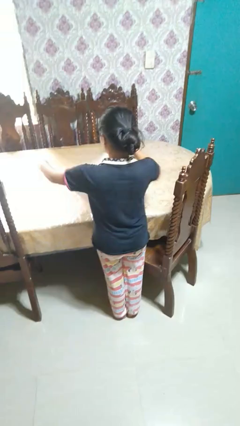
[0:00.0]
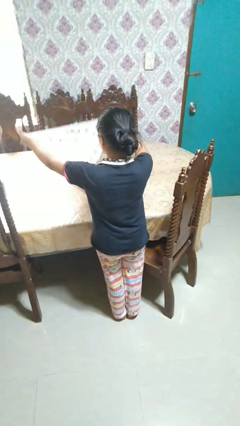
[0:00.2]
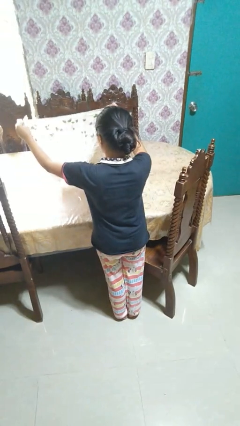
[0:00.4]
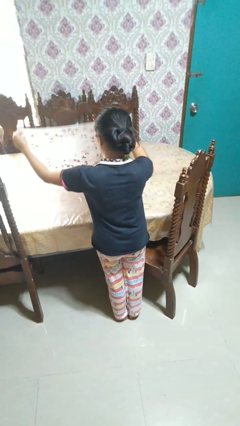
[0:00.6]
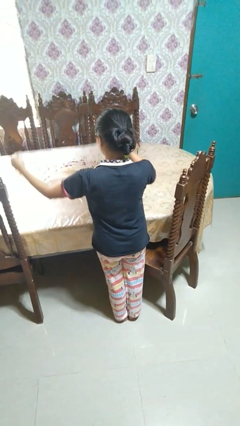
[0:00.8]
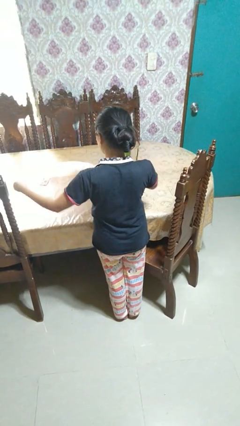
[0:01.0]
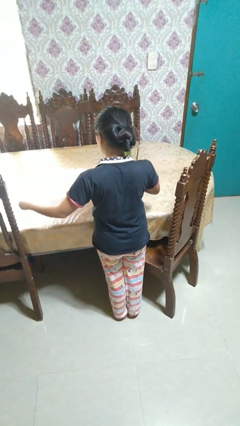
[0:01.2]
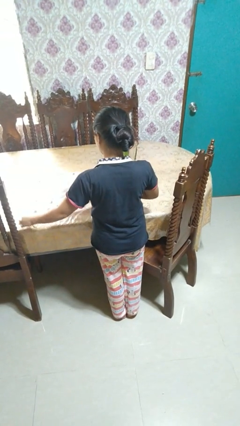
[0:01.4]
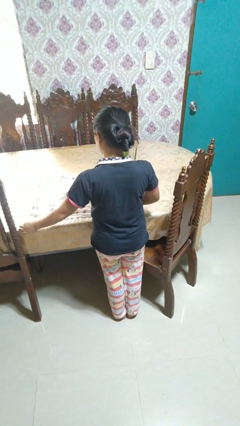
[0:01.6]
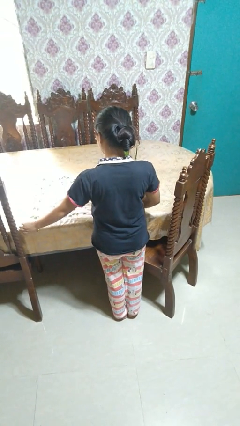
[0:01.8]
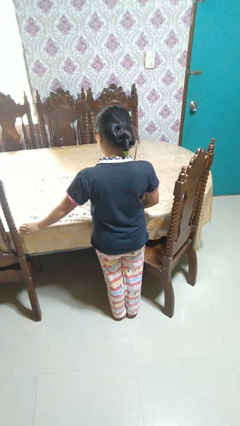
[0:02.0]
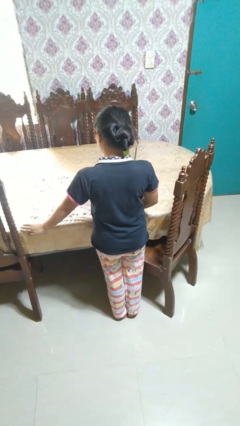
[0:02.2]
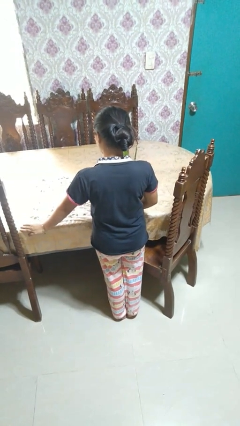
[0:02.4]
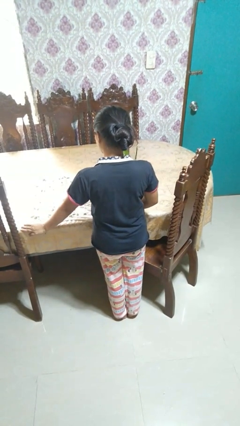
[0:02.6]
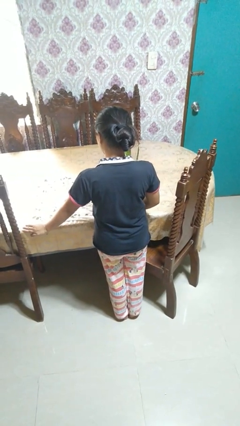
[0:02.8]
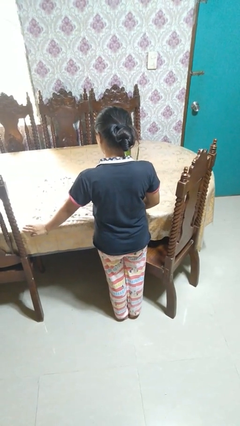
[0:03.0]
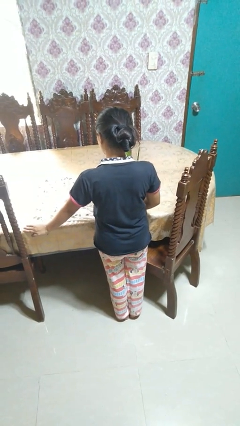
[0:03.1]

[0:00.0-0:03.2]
person spreads tablecloth

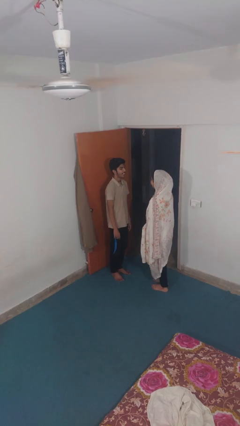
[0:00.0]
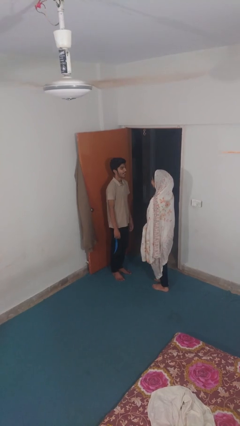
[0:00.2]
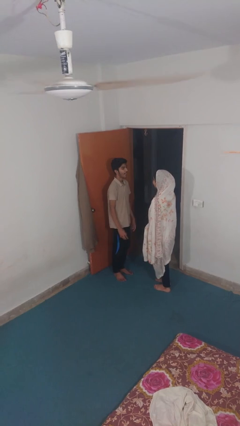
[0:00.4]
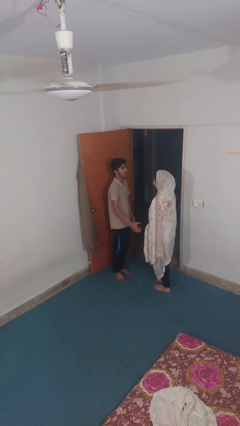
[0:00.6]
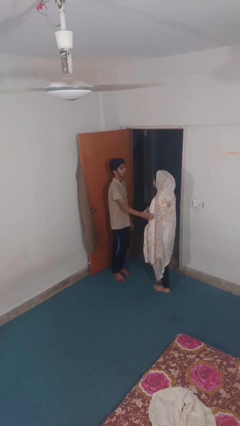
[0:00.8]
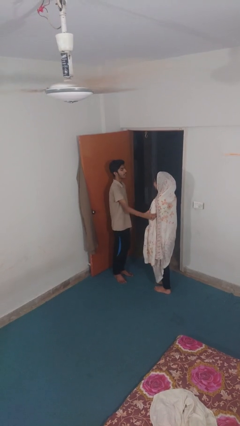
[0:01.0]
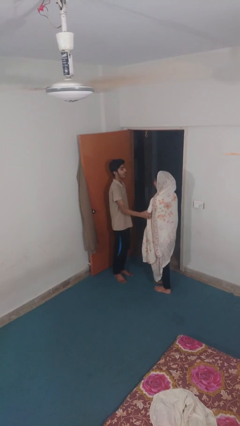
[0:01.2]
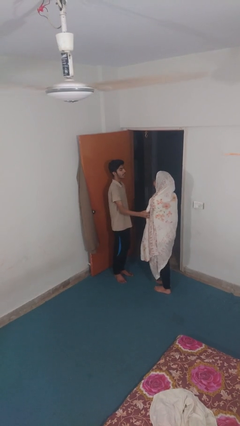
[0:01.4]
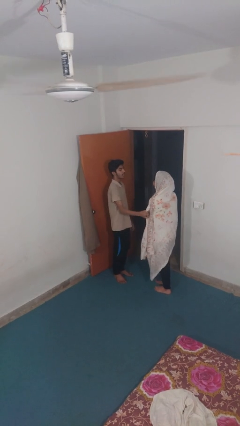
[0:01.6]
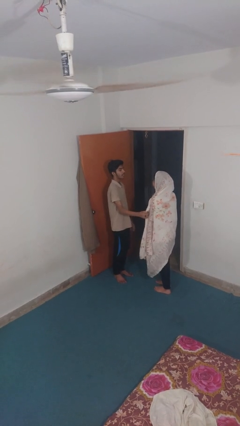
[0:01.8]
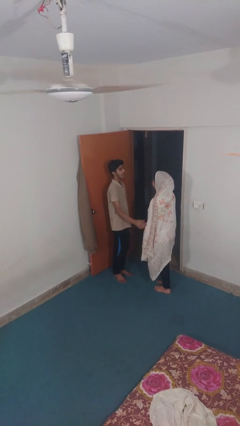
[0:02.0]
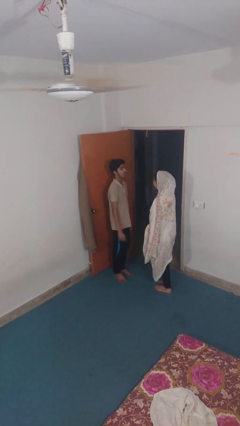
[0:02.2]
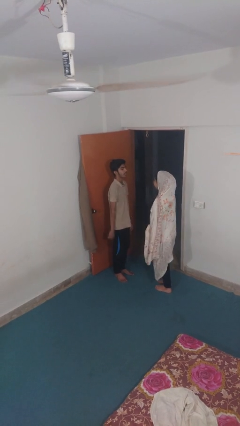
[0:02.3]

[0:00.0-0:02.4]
person grabs person by bicep

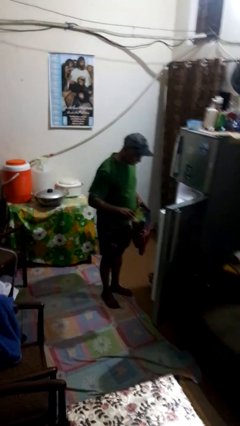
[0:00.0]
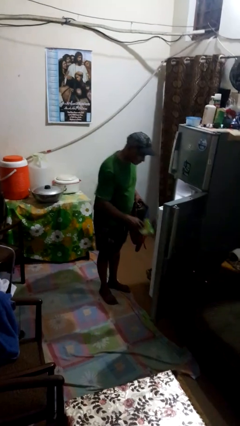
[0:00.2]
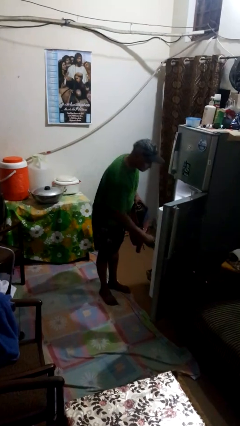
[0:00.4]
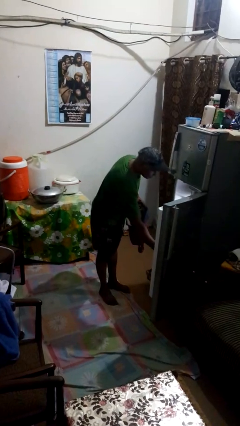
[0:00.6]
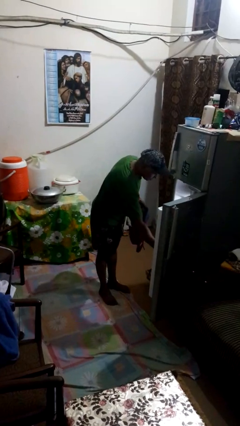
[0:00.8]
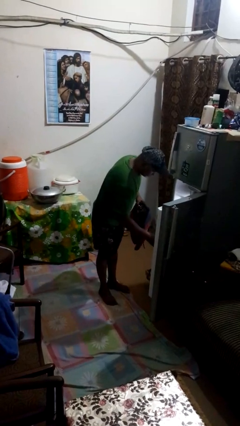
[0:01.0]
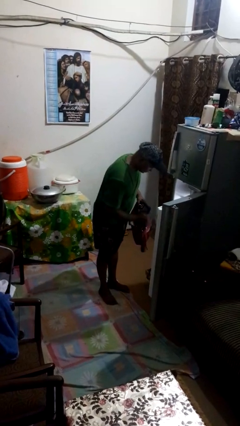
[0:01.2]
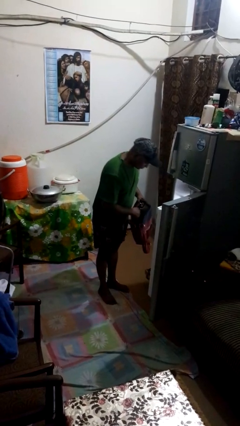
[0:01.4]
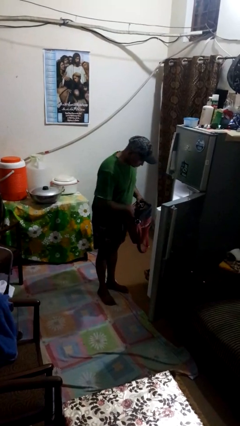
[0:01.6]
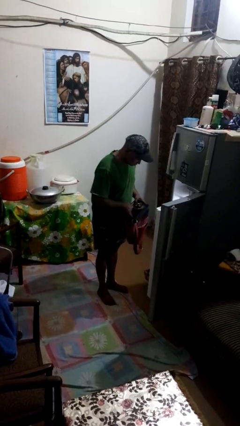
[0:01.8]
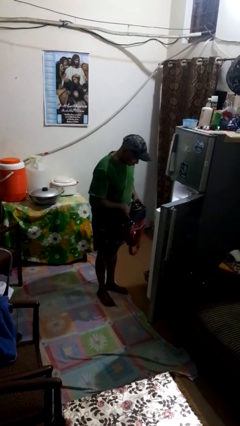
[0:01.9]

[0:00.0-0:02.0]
person loads groceries into refrigerator

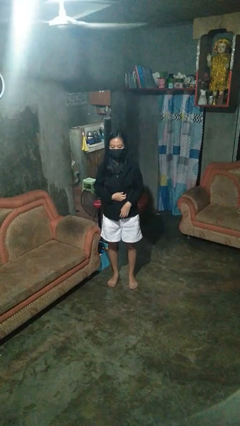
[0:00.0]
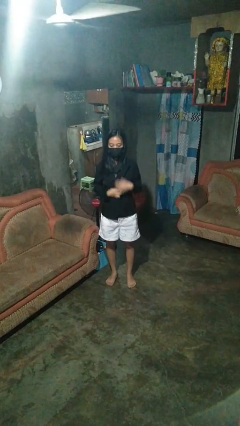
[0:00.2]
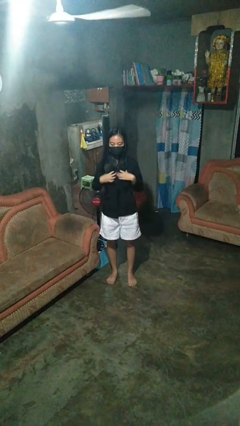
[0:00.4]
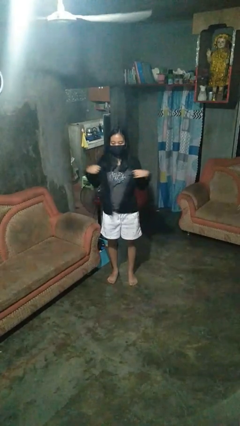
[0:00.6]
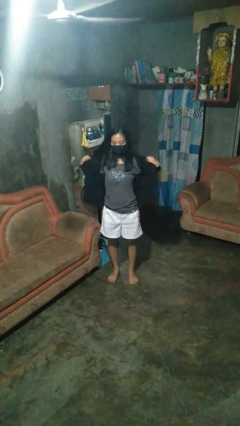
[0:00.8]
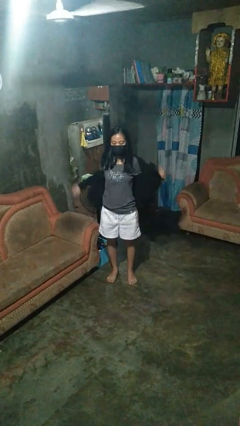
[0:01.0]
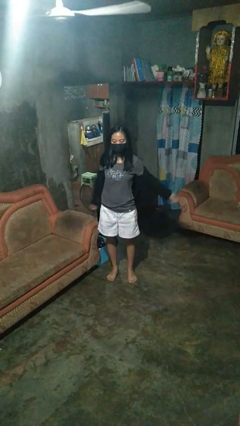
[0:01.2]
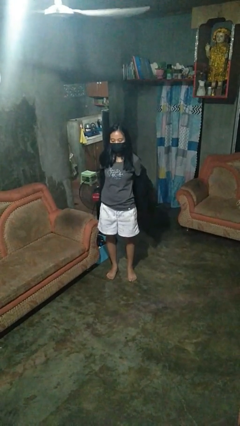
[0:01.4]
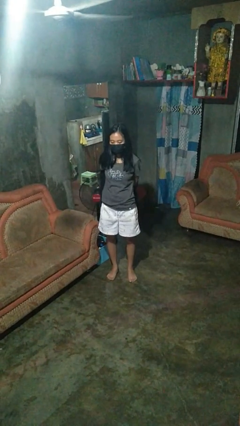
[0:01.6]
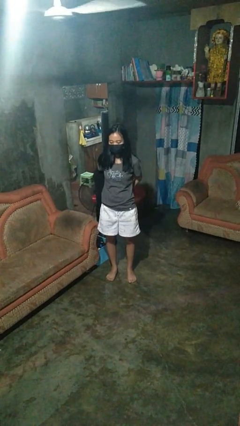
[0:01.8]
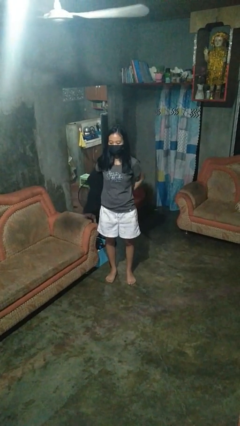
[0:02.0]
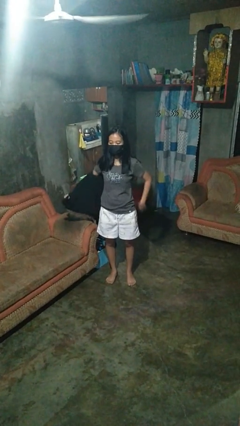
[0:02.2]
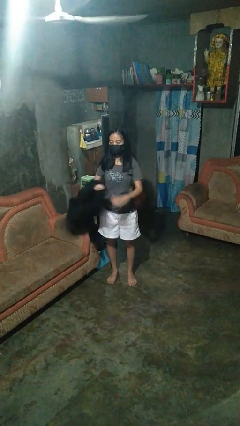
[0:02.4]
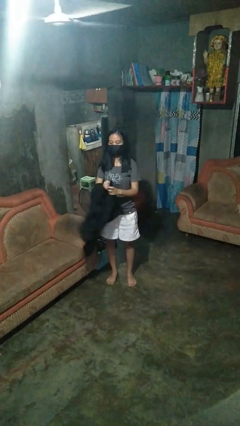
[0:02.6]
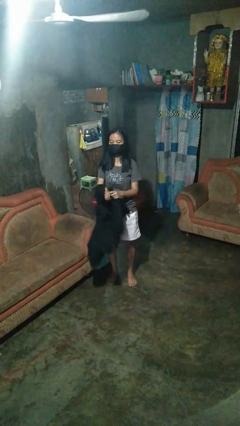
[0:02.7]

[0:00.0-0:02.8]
person takes off shirt

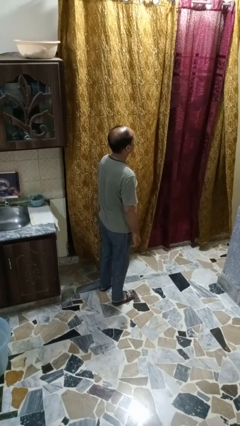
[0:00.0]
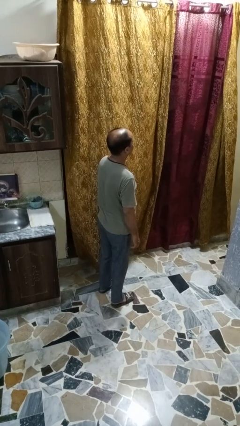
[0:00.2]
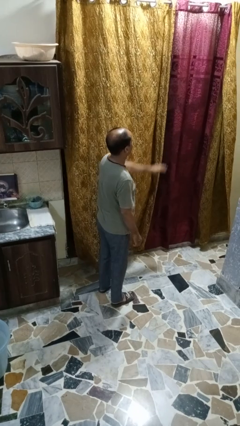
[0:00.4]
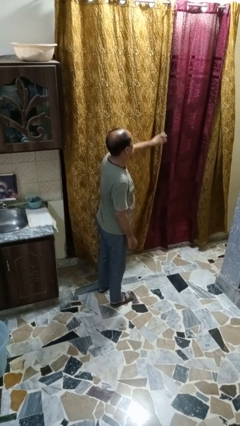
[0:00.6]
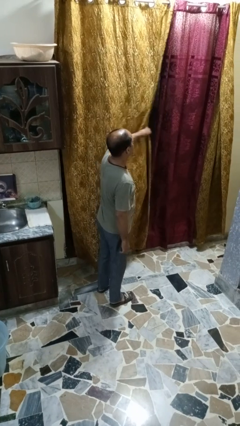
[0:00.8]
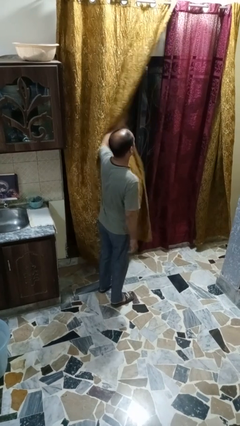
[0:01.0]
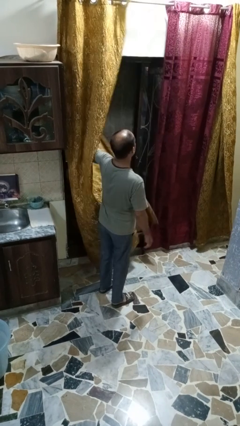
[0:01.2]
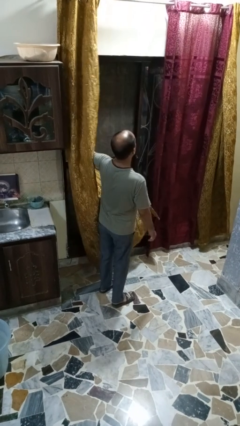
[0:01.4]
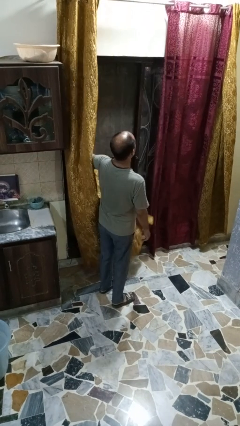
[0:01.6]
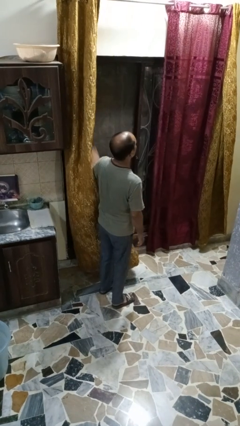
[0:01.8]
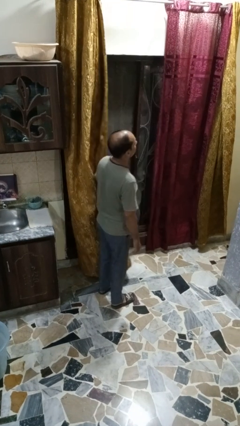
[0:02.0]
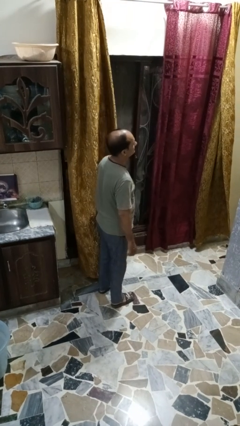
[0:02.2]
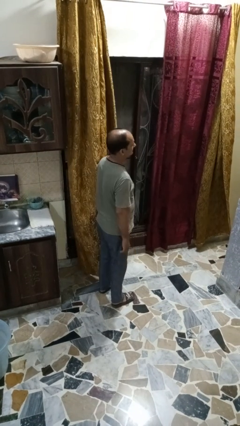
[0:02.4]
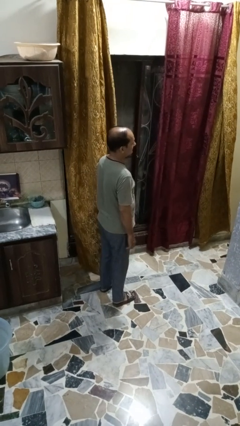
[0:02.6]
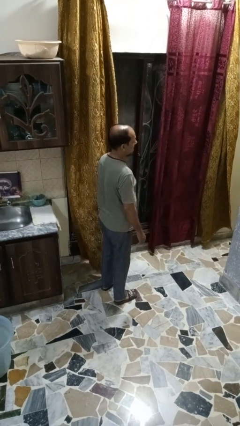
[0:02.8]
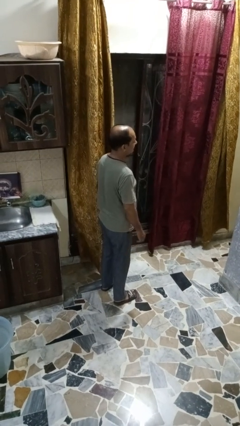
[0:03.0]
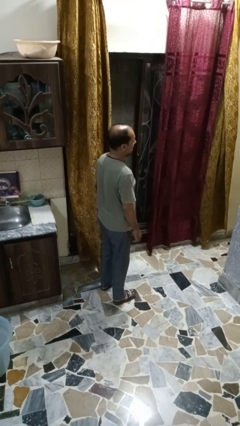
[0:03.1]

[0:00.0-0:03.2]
person opens curtains

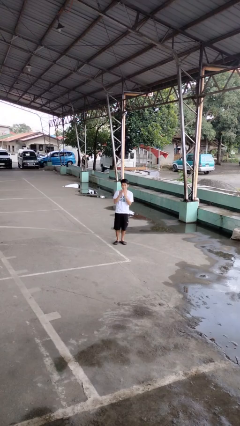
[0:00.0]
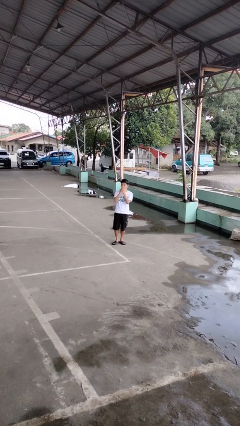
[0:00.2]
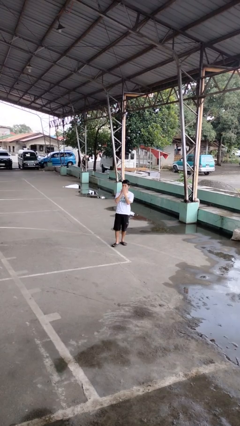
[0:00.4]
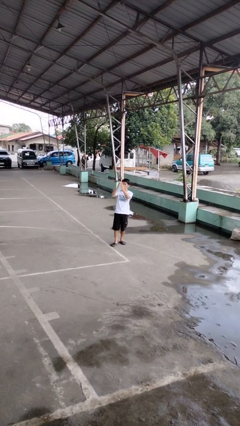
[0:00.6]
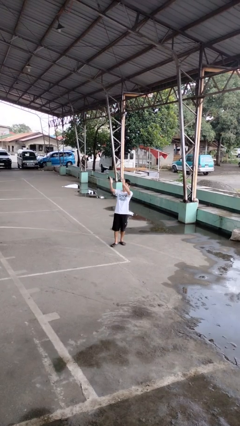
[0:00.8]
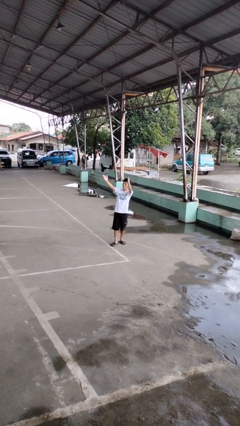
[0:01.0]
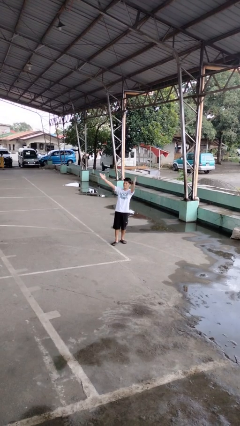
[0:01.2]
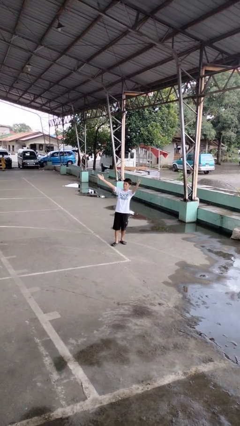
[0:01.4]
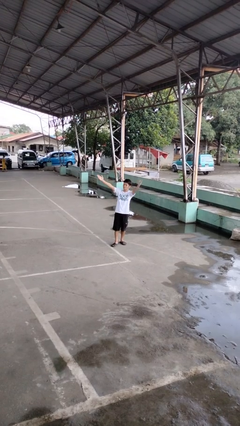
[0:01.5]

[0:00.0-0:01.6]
person gestures blow kiss

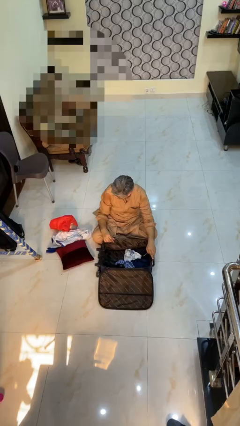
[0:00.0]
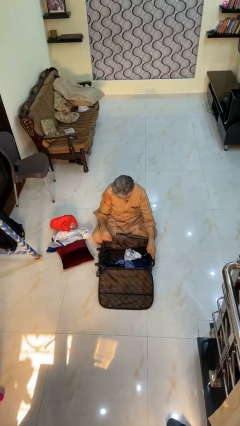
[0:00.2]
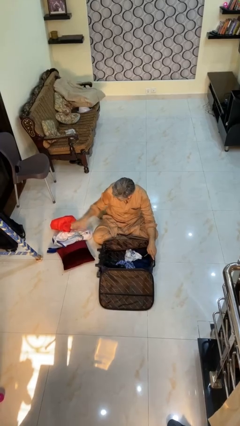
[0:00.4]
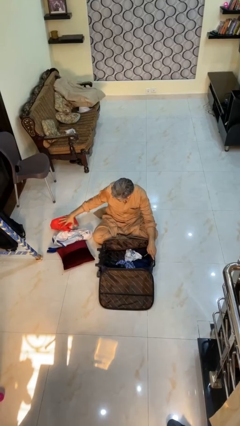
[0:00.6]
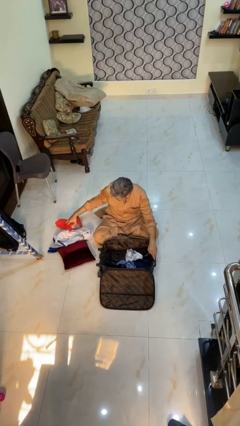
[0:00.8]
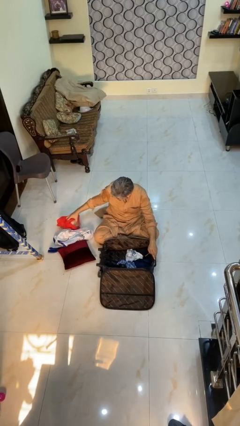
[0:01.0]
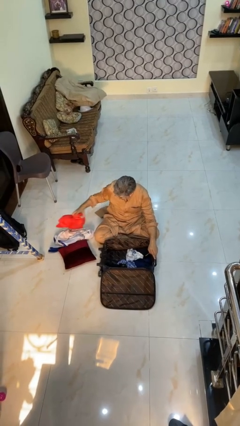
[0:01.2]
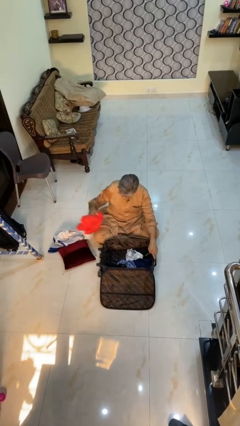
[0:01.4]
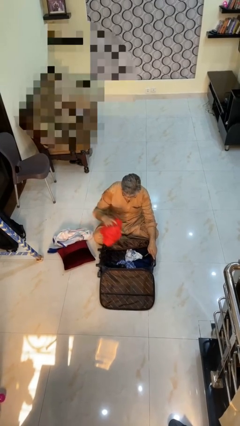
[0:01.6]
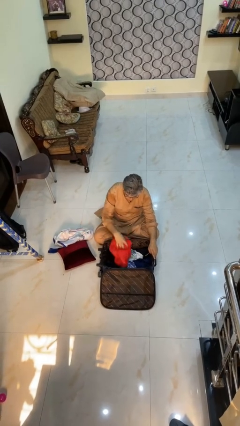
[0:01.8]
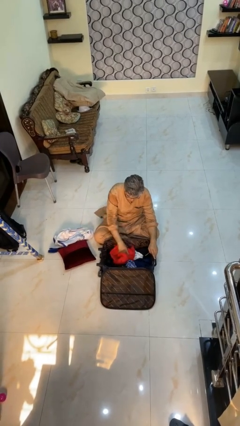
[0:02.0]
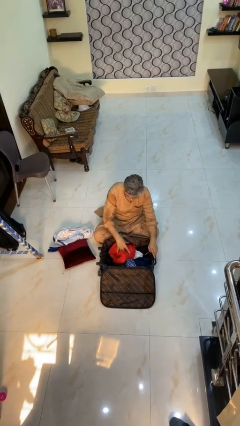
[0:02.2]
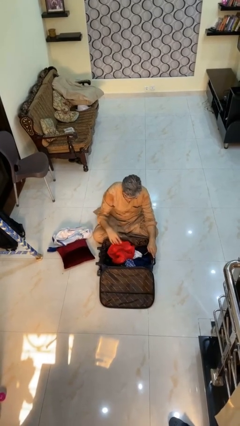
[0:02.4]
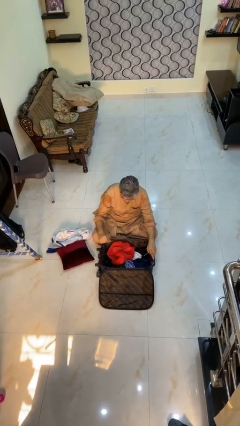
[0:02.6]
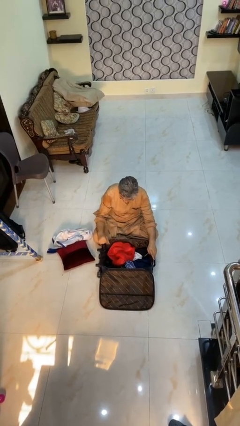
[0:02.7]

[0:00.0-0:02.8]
person loads clothes into suitcase
